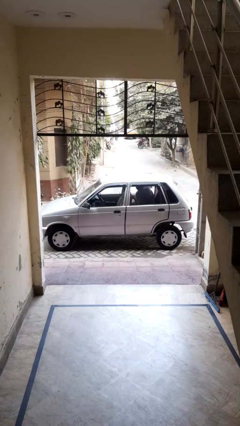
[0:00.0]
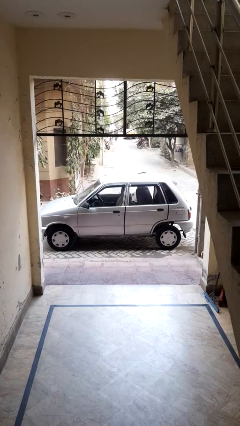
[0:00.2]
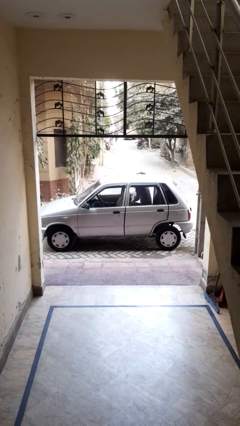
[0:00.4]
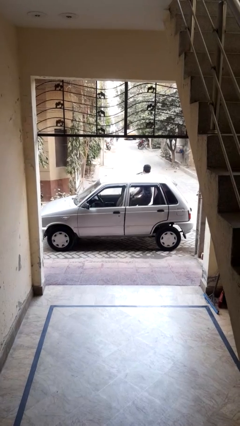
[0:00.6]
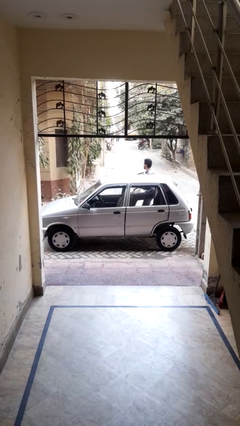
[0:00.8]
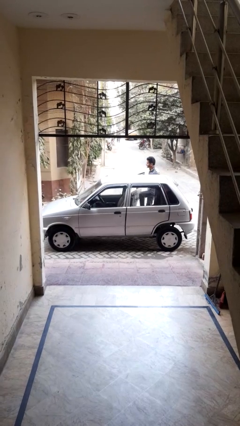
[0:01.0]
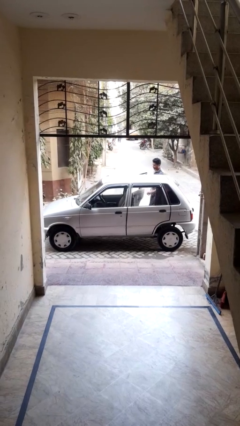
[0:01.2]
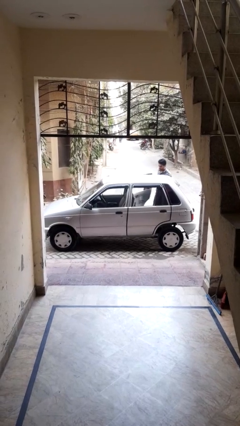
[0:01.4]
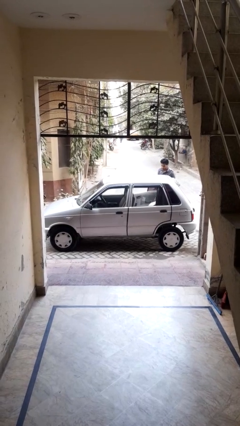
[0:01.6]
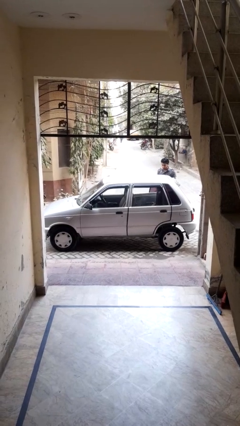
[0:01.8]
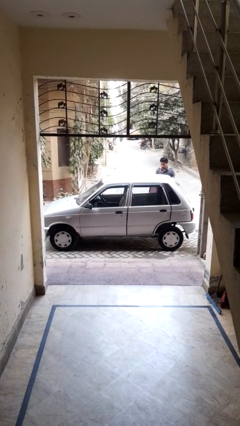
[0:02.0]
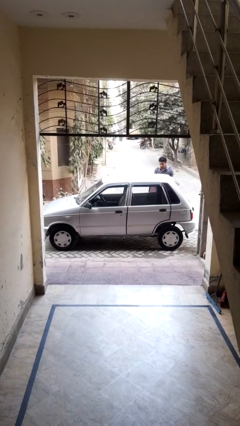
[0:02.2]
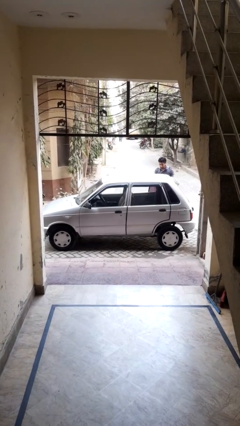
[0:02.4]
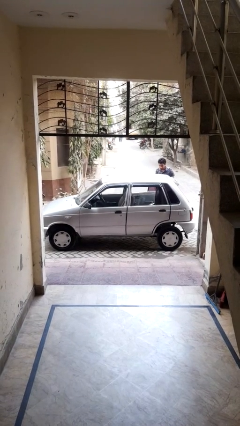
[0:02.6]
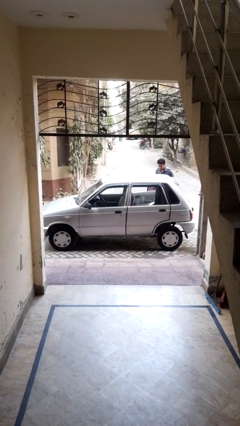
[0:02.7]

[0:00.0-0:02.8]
car drops off person

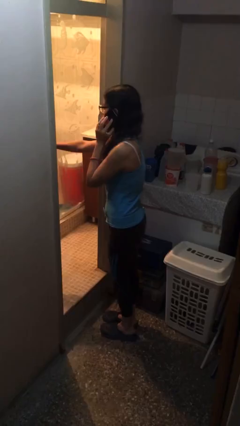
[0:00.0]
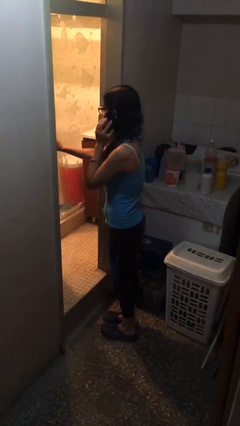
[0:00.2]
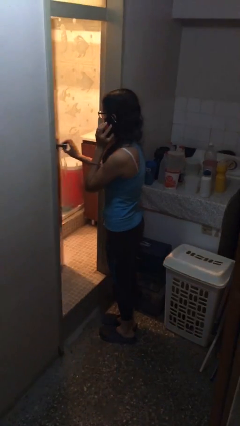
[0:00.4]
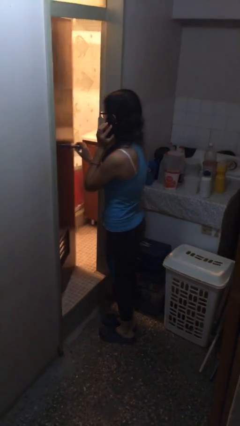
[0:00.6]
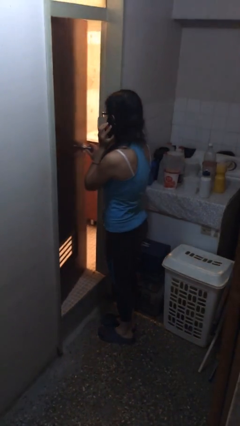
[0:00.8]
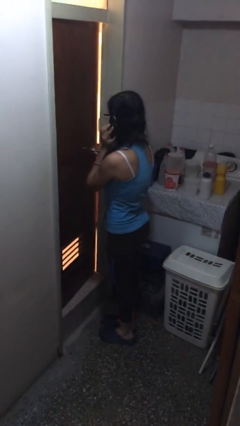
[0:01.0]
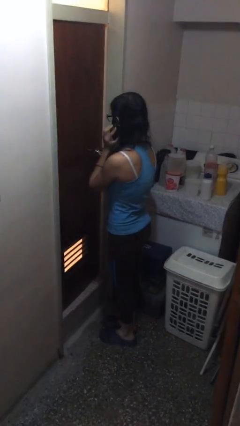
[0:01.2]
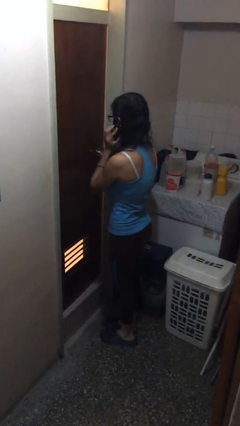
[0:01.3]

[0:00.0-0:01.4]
person closes facility door

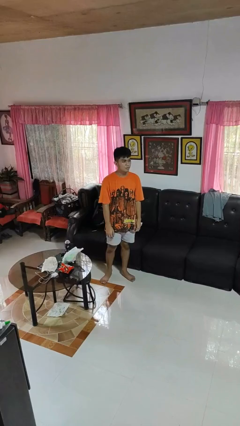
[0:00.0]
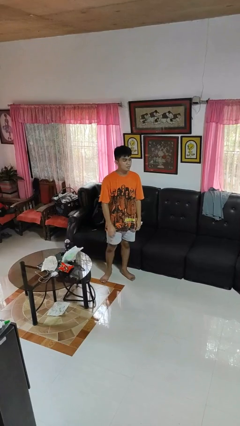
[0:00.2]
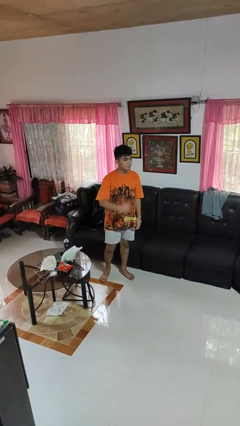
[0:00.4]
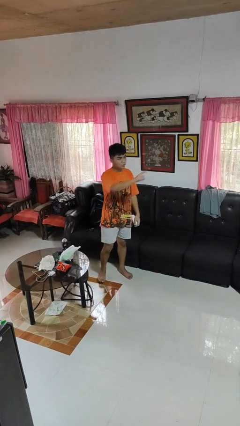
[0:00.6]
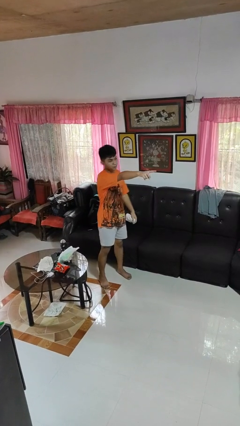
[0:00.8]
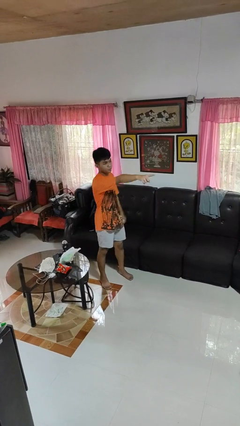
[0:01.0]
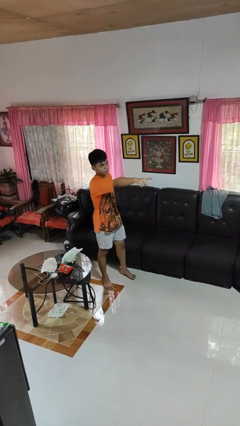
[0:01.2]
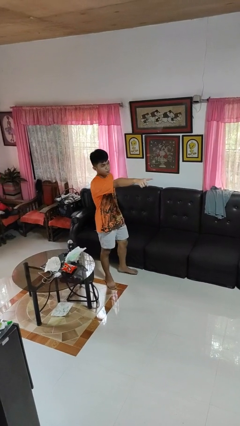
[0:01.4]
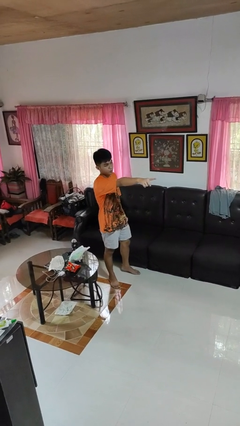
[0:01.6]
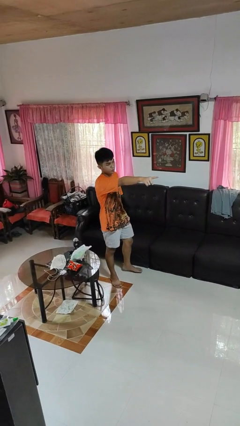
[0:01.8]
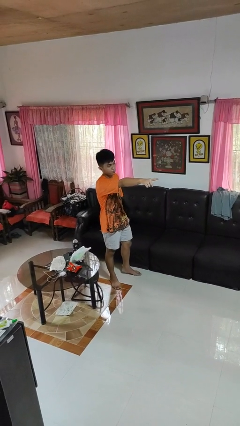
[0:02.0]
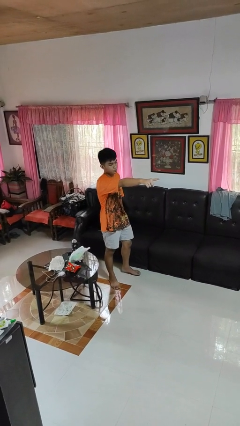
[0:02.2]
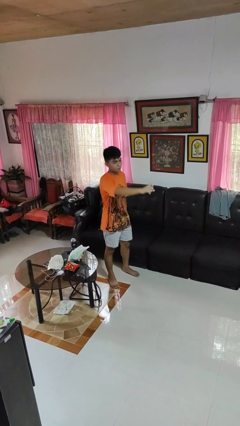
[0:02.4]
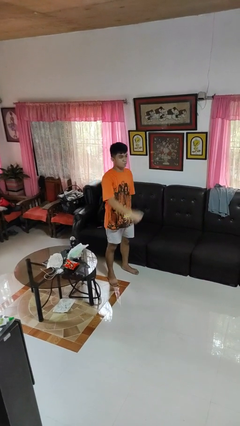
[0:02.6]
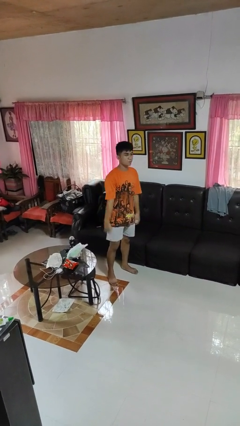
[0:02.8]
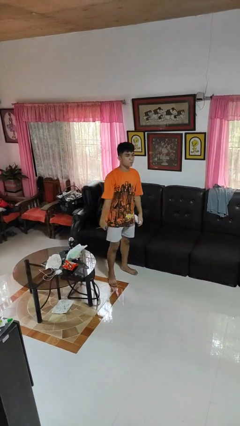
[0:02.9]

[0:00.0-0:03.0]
person points at person

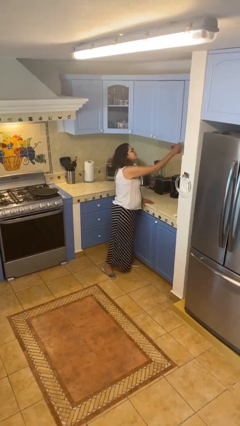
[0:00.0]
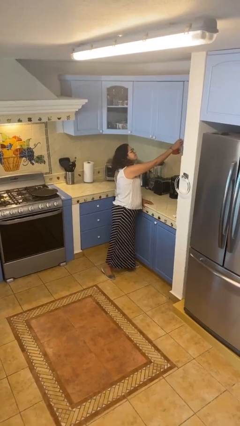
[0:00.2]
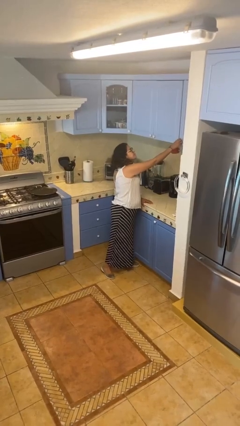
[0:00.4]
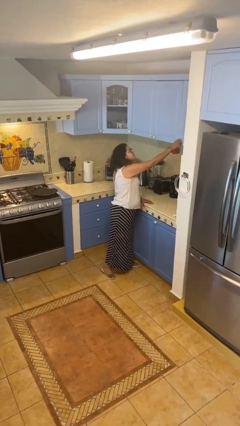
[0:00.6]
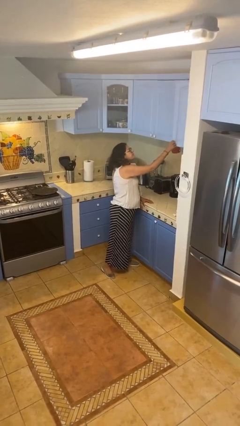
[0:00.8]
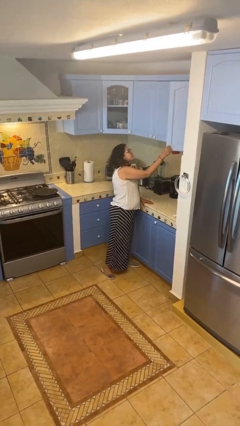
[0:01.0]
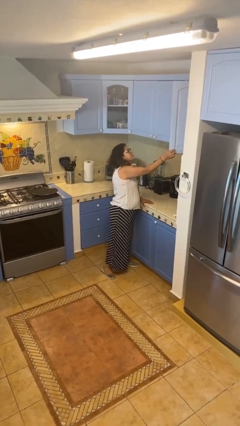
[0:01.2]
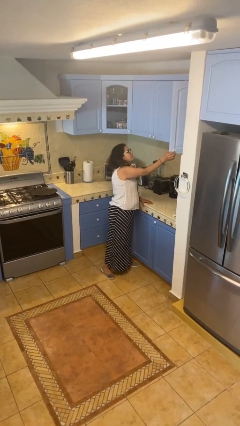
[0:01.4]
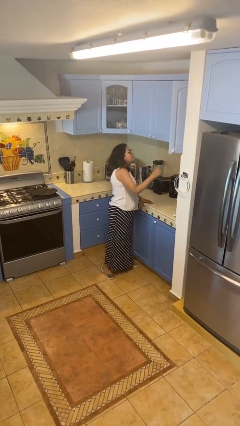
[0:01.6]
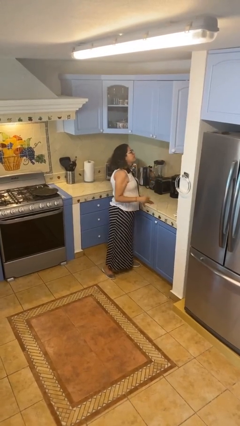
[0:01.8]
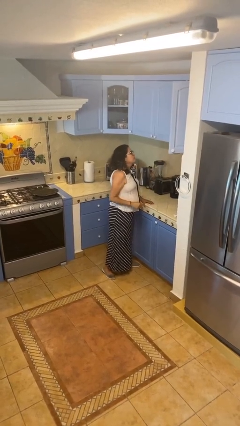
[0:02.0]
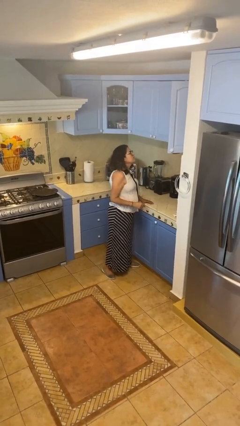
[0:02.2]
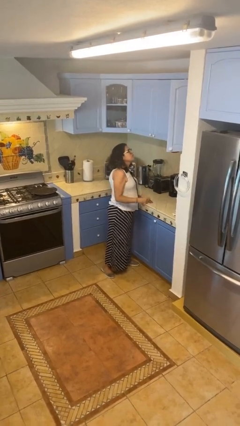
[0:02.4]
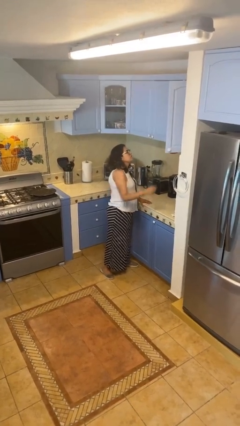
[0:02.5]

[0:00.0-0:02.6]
person opens cabinet

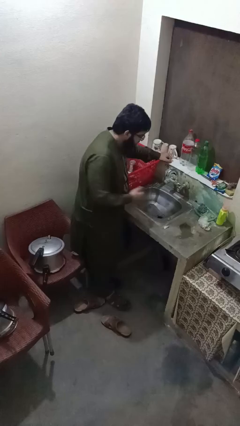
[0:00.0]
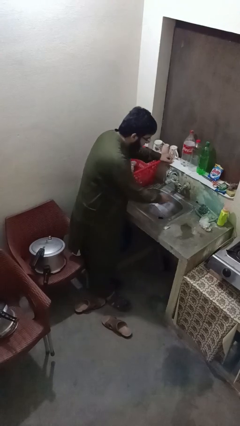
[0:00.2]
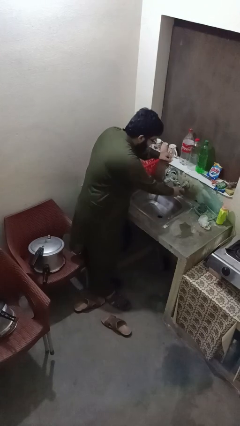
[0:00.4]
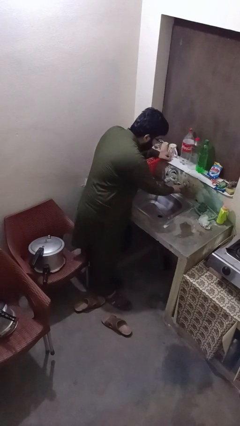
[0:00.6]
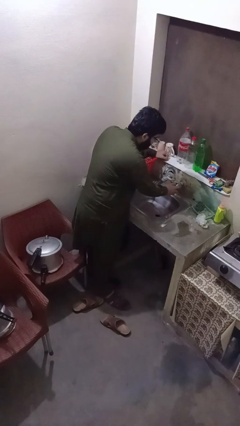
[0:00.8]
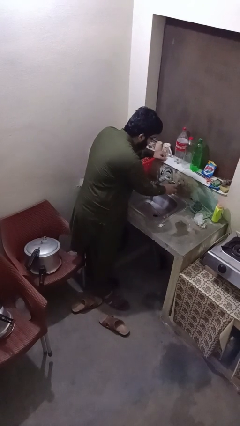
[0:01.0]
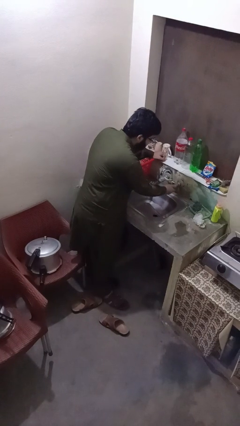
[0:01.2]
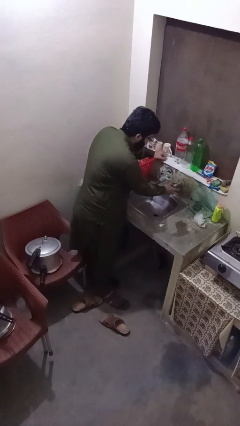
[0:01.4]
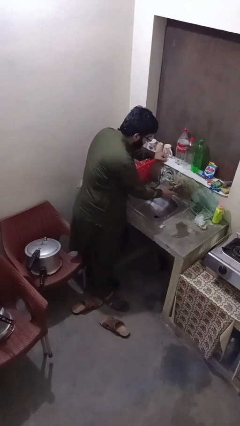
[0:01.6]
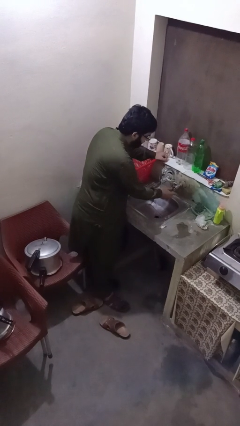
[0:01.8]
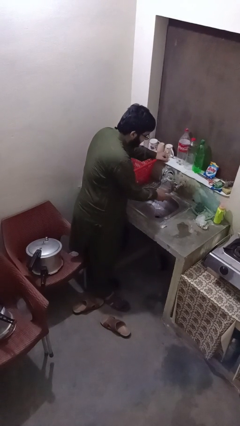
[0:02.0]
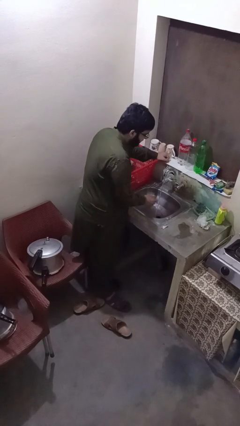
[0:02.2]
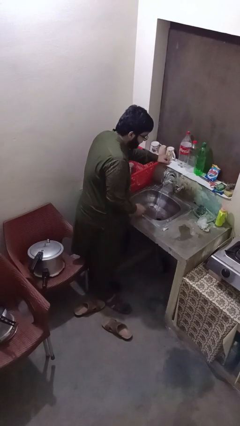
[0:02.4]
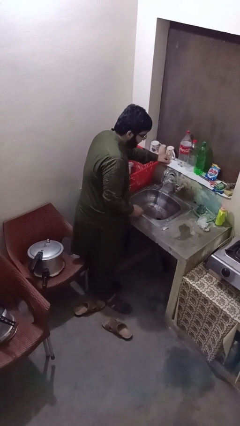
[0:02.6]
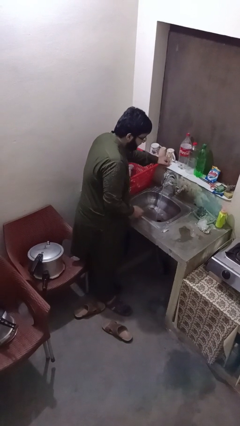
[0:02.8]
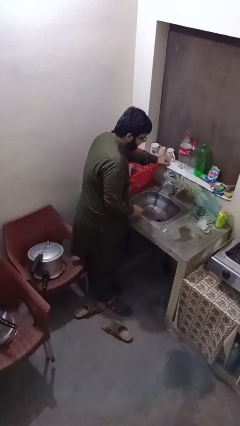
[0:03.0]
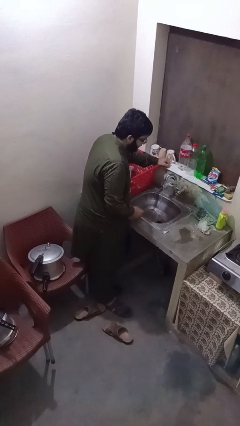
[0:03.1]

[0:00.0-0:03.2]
person turns on faucet

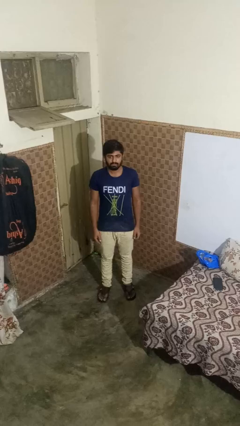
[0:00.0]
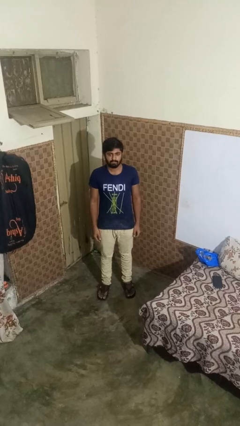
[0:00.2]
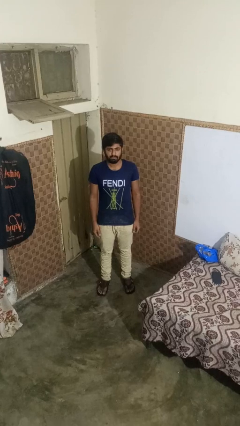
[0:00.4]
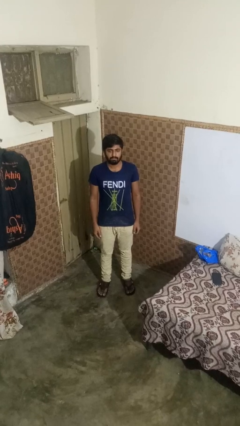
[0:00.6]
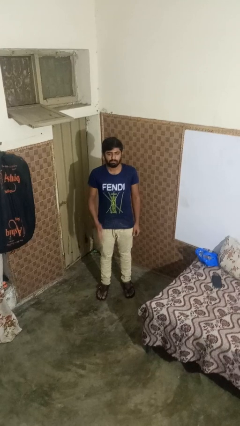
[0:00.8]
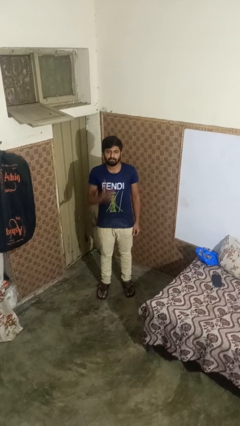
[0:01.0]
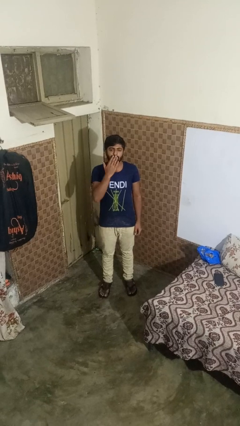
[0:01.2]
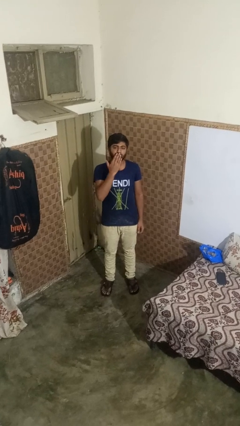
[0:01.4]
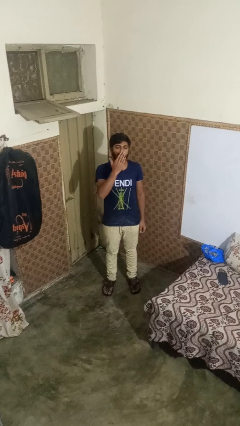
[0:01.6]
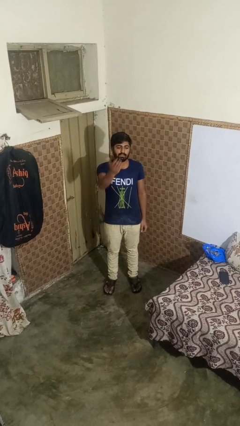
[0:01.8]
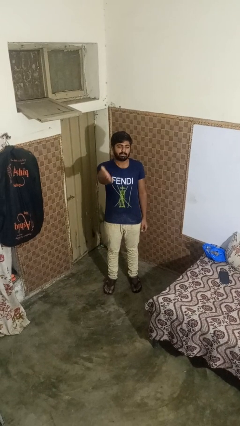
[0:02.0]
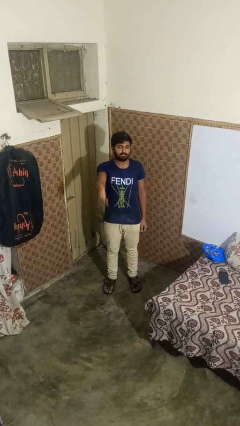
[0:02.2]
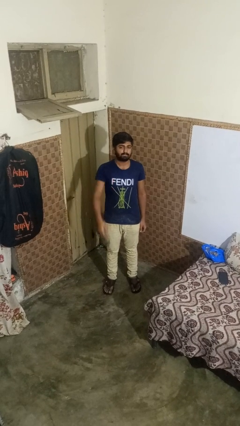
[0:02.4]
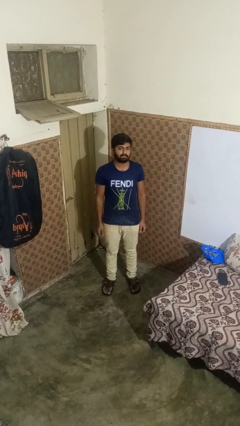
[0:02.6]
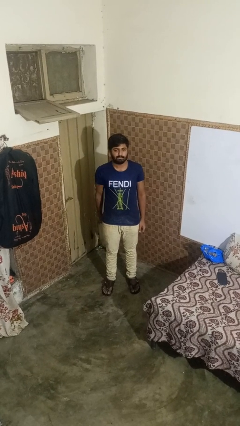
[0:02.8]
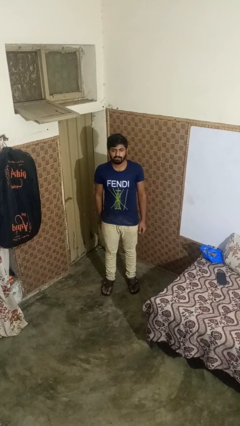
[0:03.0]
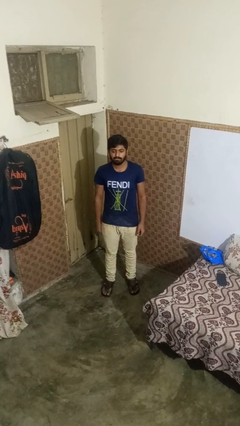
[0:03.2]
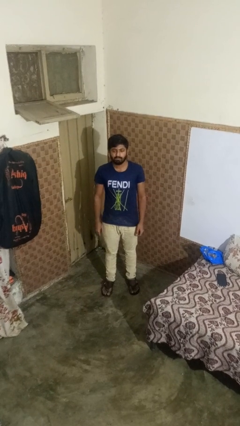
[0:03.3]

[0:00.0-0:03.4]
person gestures blow kiss

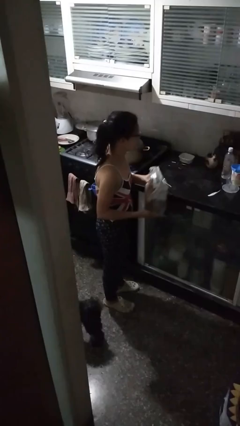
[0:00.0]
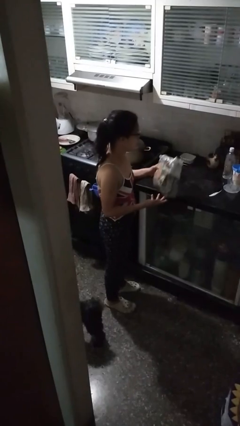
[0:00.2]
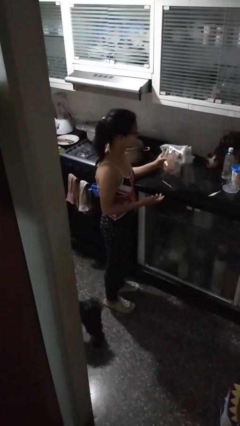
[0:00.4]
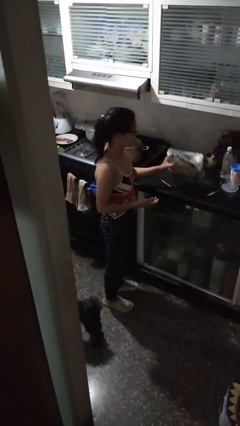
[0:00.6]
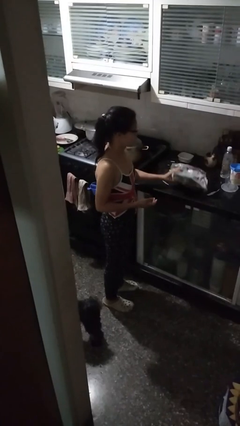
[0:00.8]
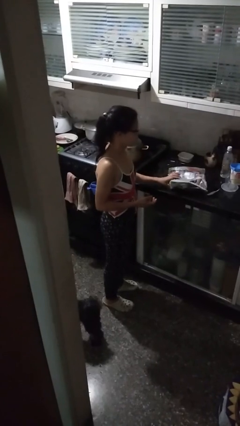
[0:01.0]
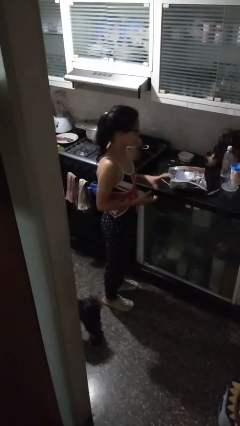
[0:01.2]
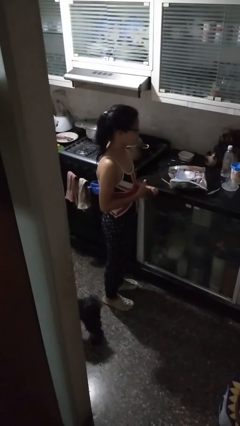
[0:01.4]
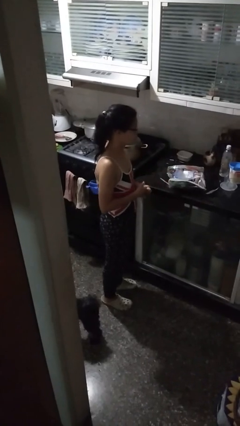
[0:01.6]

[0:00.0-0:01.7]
person puts down object on countertop
